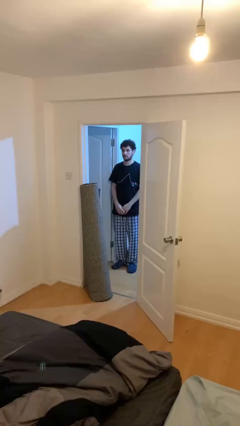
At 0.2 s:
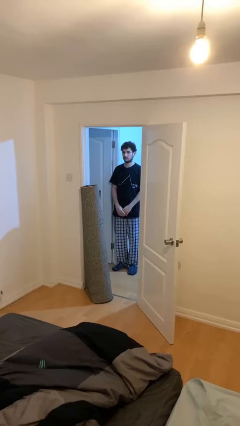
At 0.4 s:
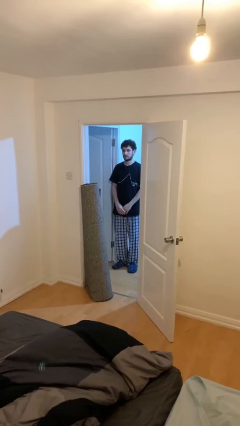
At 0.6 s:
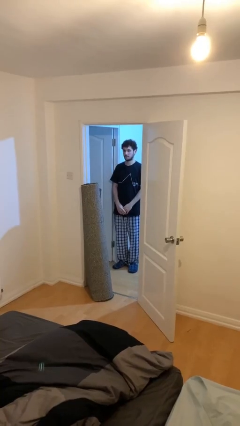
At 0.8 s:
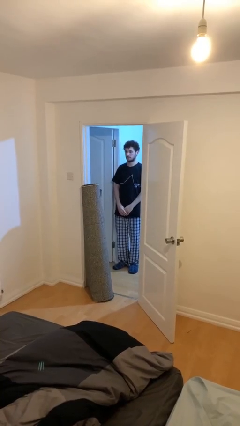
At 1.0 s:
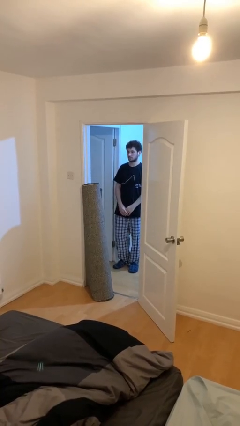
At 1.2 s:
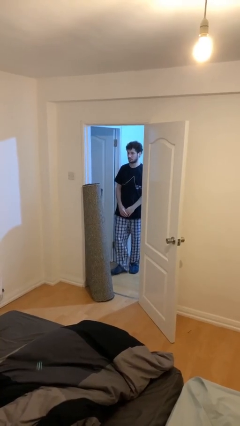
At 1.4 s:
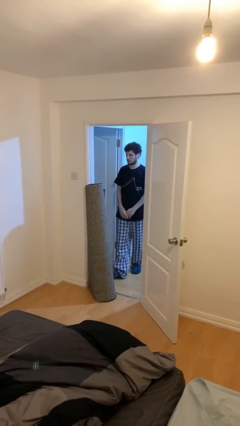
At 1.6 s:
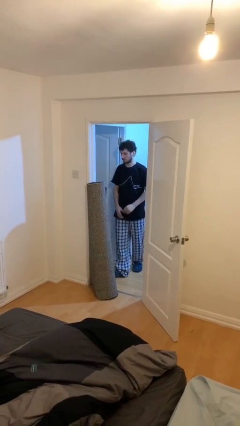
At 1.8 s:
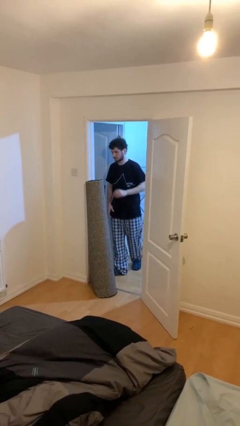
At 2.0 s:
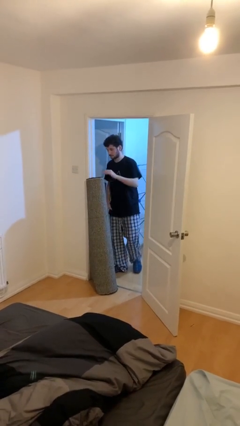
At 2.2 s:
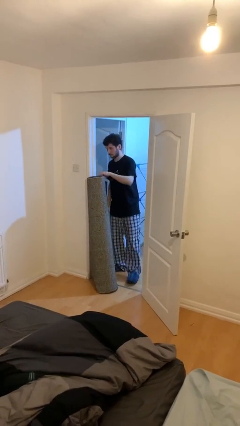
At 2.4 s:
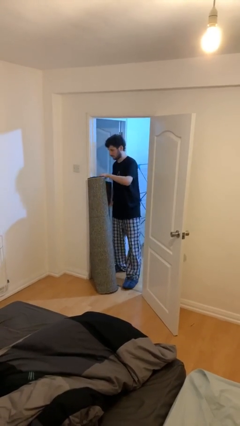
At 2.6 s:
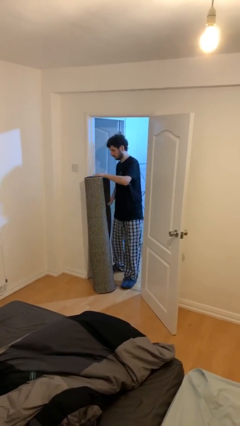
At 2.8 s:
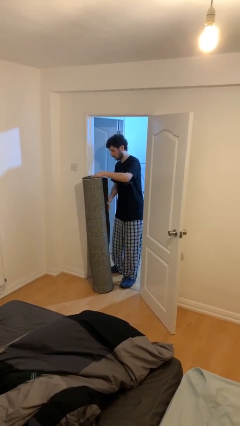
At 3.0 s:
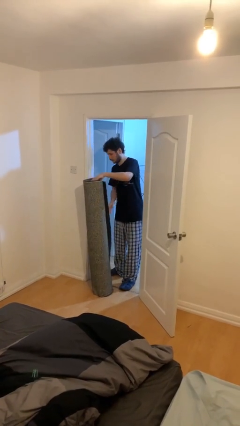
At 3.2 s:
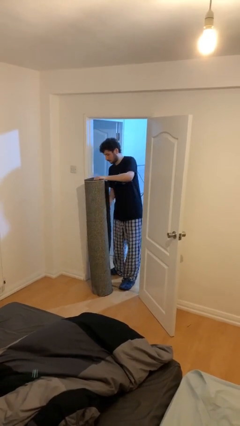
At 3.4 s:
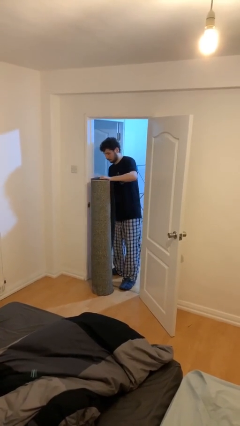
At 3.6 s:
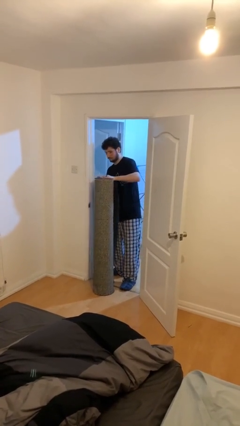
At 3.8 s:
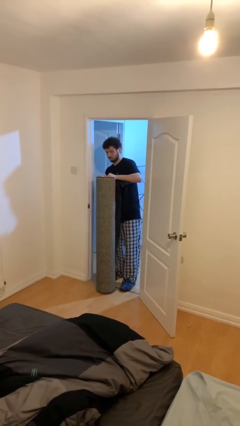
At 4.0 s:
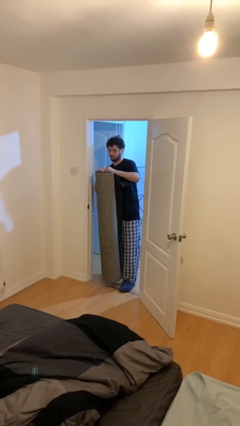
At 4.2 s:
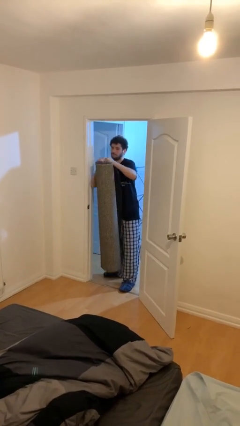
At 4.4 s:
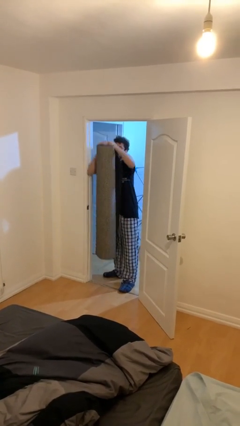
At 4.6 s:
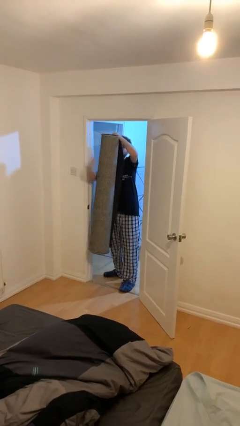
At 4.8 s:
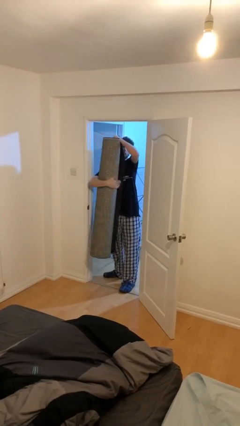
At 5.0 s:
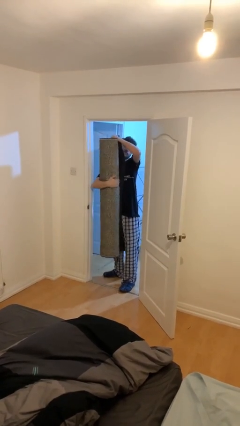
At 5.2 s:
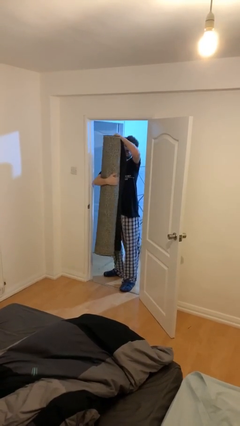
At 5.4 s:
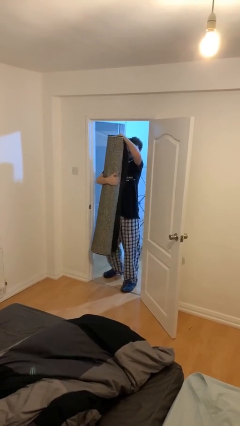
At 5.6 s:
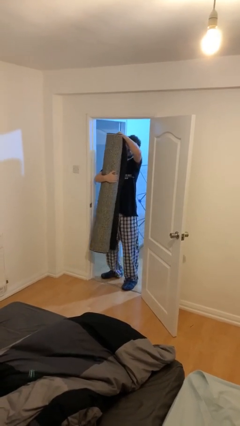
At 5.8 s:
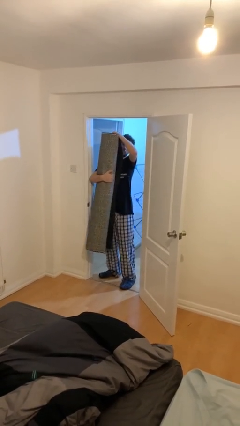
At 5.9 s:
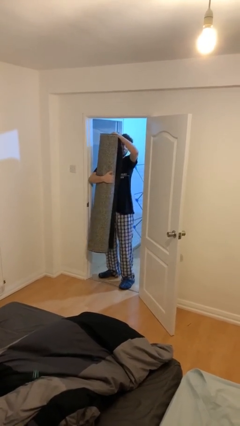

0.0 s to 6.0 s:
person picks up object from floor

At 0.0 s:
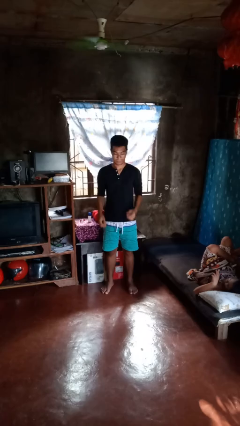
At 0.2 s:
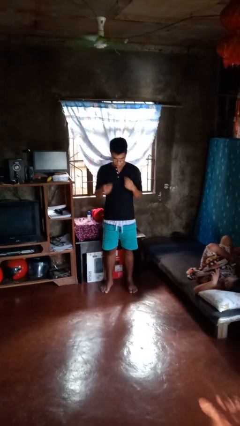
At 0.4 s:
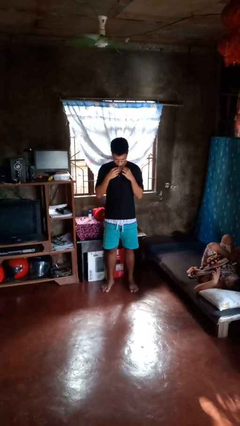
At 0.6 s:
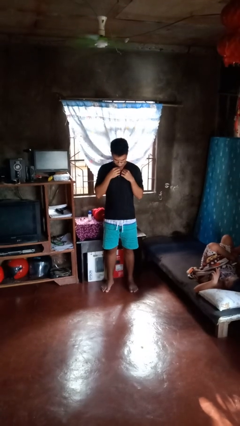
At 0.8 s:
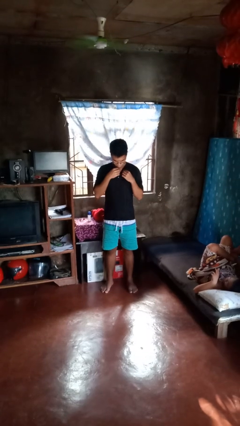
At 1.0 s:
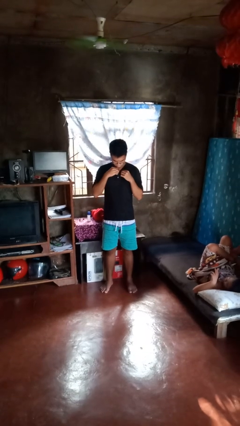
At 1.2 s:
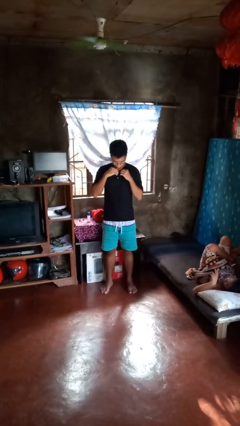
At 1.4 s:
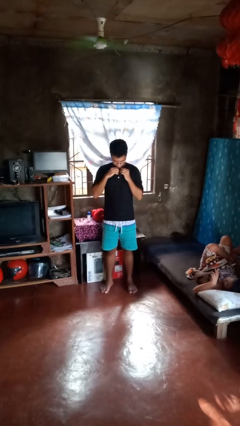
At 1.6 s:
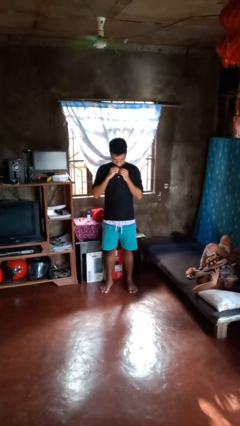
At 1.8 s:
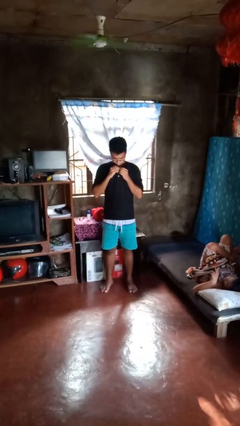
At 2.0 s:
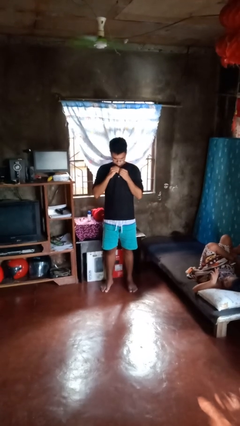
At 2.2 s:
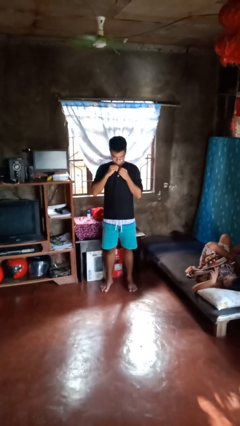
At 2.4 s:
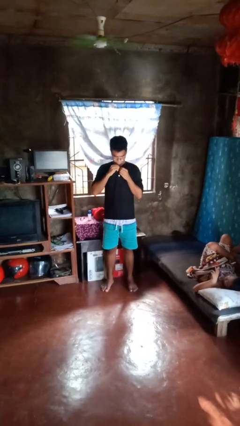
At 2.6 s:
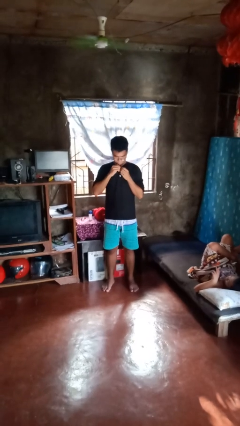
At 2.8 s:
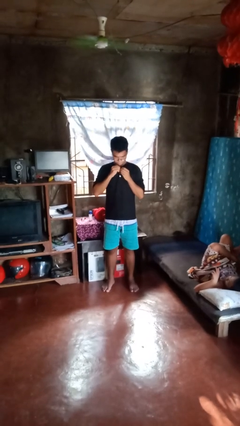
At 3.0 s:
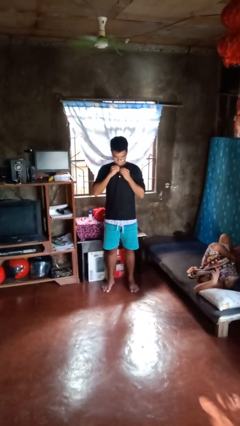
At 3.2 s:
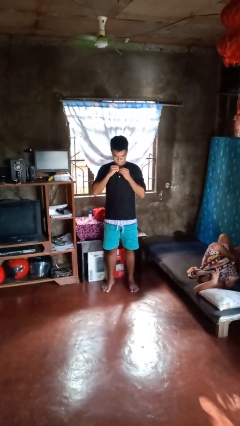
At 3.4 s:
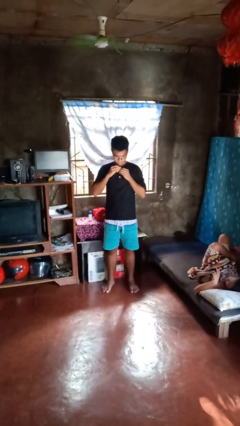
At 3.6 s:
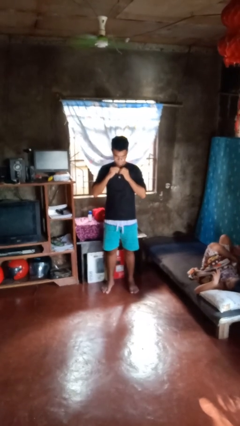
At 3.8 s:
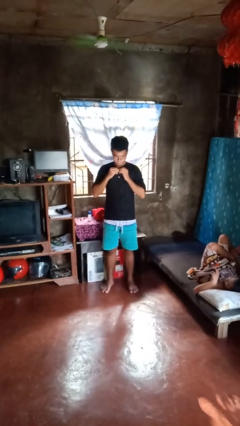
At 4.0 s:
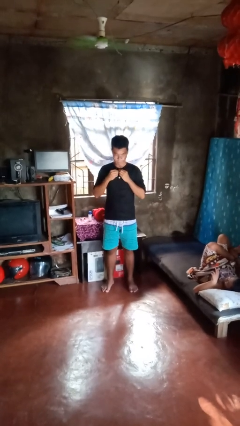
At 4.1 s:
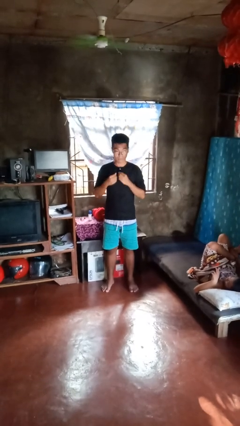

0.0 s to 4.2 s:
person buttons shirt

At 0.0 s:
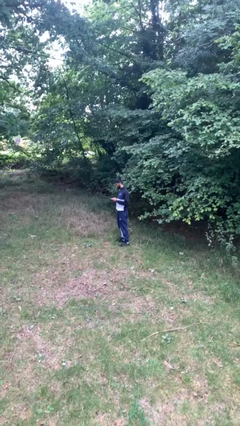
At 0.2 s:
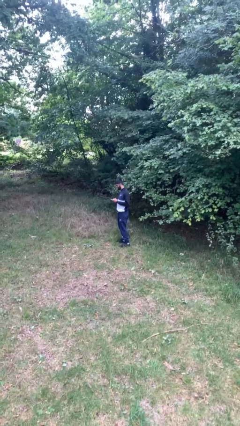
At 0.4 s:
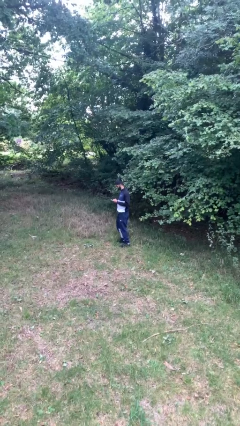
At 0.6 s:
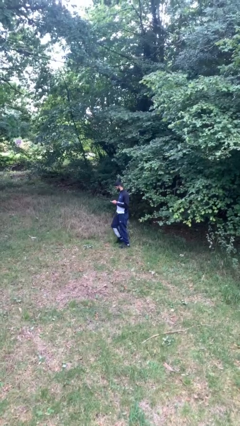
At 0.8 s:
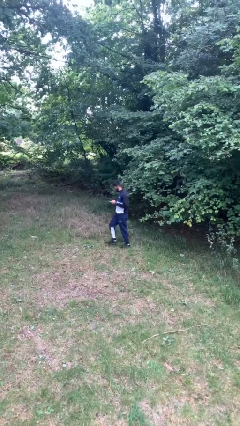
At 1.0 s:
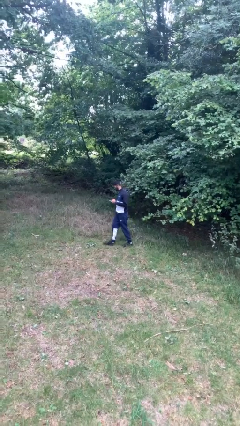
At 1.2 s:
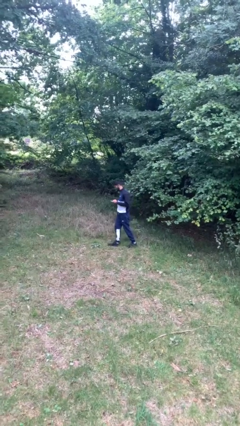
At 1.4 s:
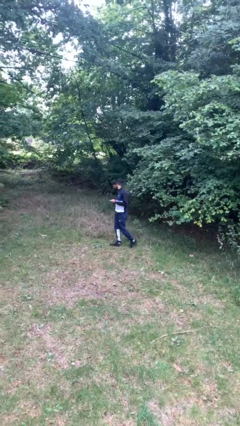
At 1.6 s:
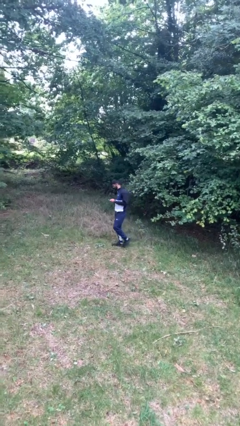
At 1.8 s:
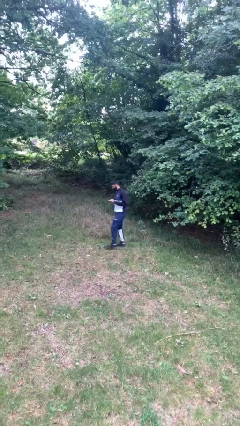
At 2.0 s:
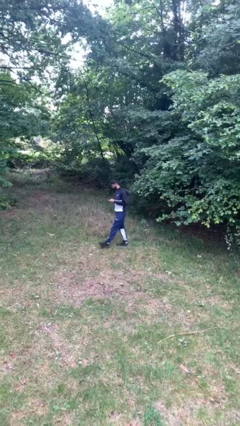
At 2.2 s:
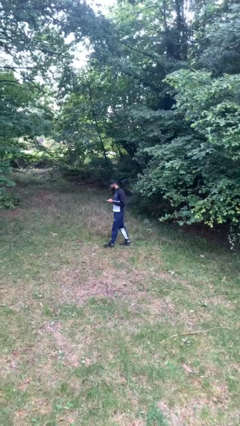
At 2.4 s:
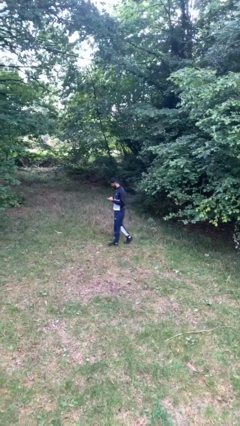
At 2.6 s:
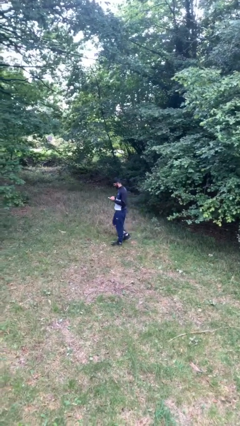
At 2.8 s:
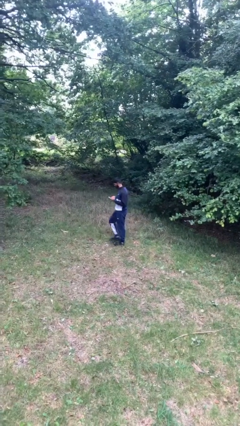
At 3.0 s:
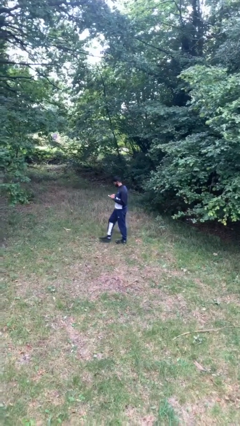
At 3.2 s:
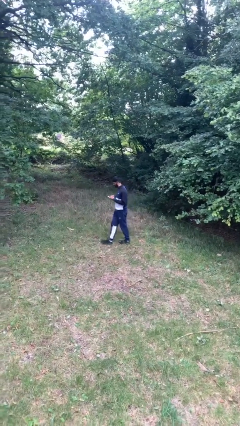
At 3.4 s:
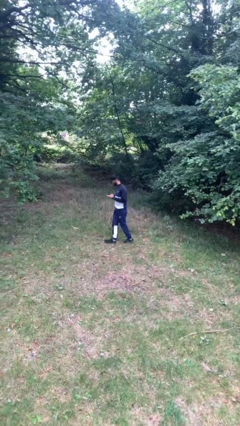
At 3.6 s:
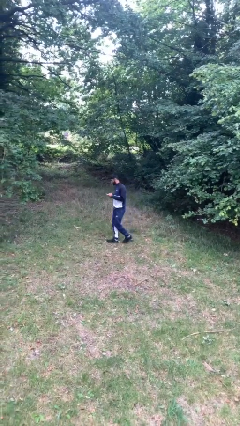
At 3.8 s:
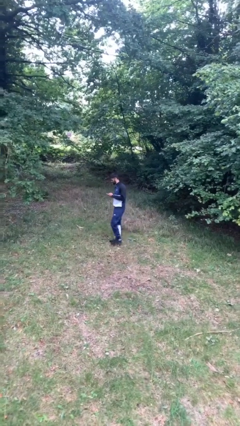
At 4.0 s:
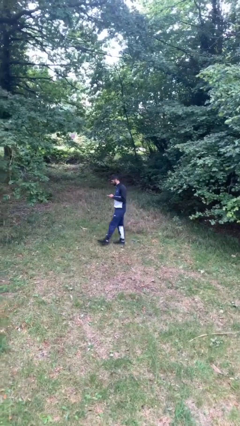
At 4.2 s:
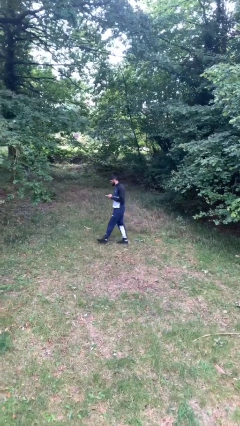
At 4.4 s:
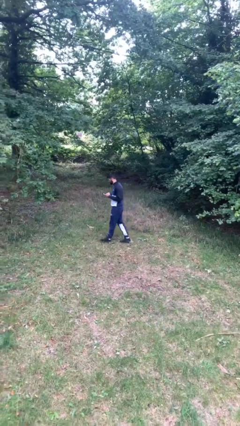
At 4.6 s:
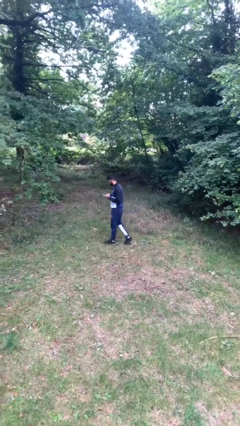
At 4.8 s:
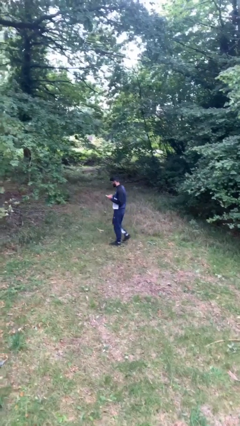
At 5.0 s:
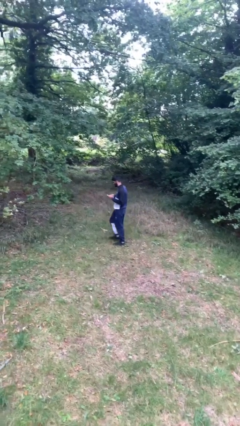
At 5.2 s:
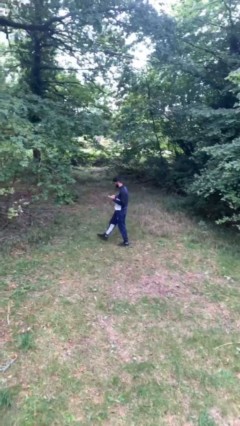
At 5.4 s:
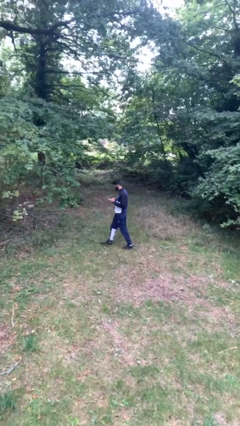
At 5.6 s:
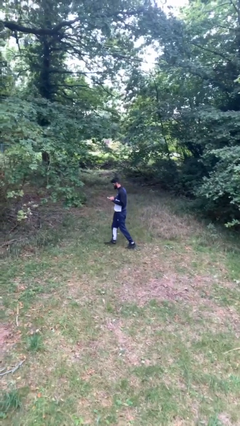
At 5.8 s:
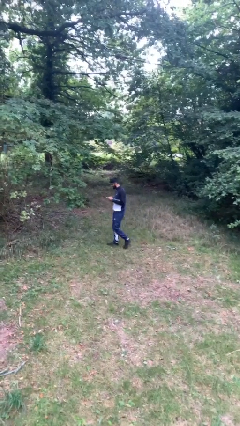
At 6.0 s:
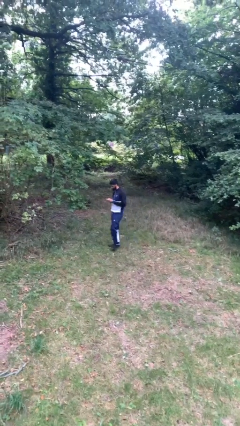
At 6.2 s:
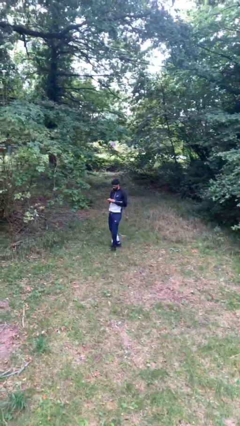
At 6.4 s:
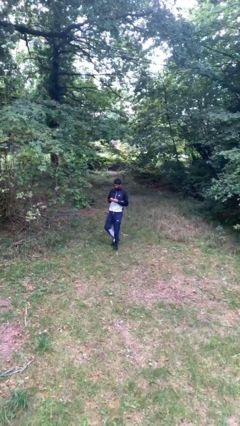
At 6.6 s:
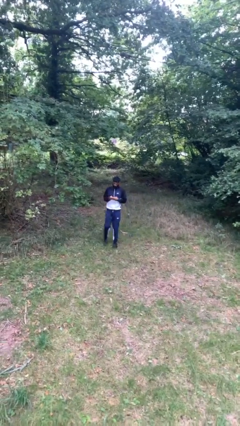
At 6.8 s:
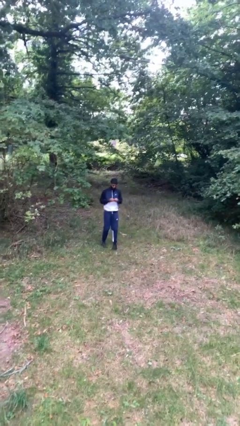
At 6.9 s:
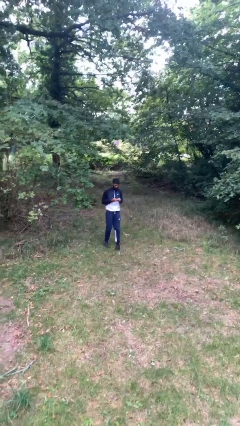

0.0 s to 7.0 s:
person texts on phone

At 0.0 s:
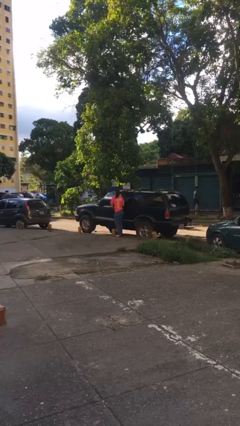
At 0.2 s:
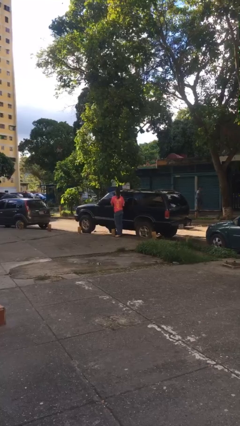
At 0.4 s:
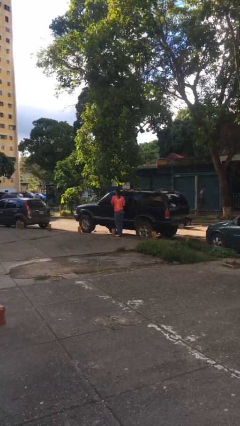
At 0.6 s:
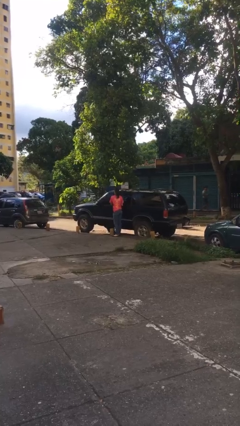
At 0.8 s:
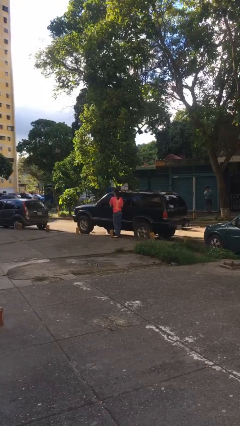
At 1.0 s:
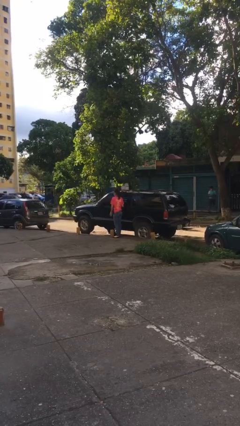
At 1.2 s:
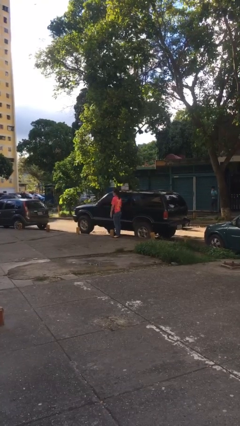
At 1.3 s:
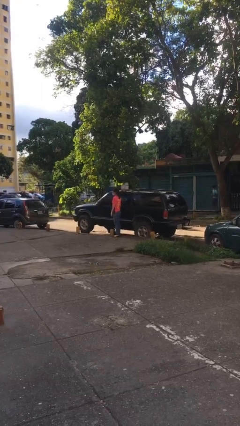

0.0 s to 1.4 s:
person closes car door
